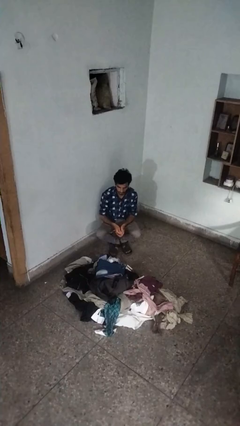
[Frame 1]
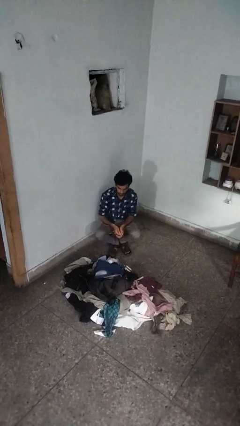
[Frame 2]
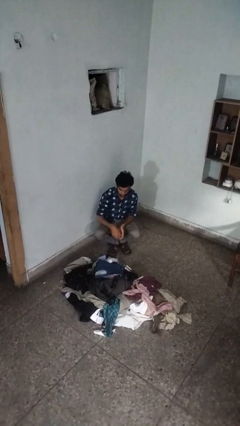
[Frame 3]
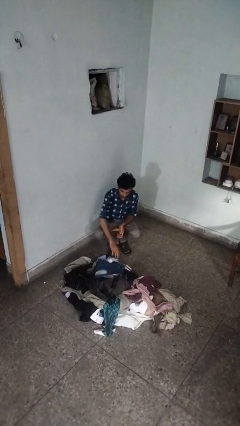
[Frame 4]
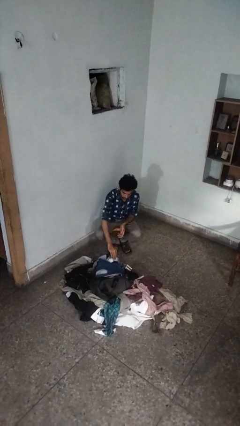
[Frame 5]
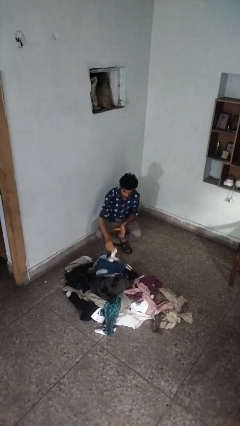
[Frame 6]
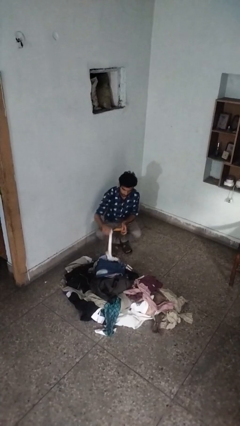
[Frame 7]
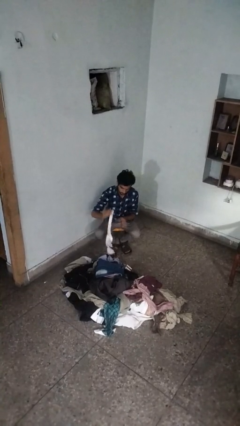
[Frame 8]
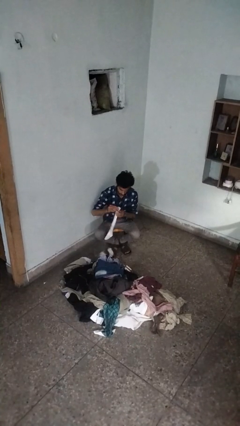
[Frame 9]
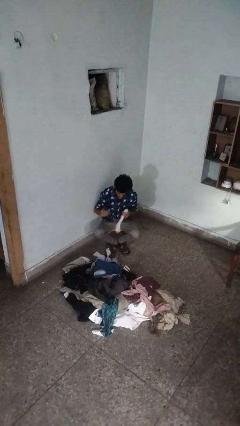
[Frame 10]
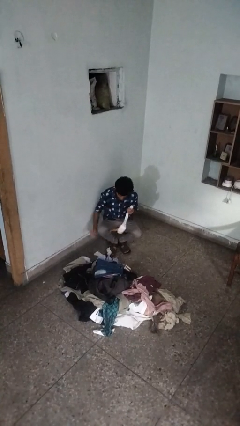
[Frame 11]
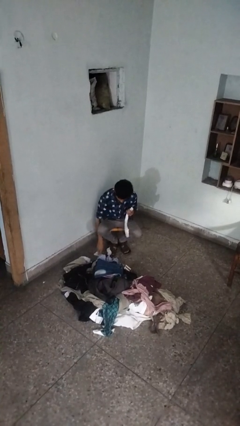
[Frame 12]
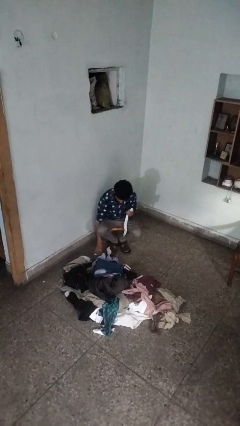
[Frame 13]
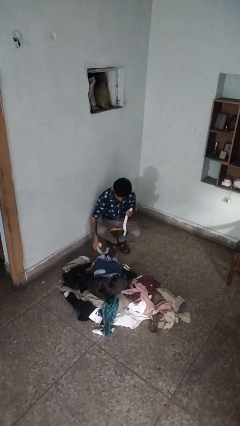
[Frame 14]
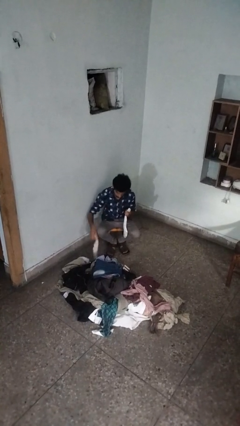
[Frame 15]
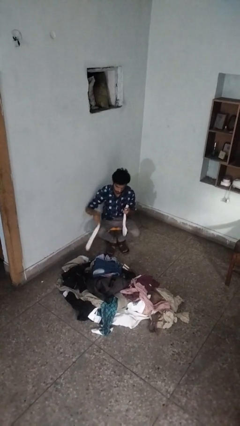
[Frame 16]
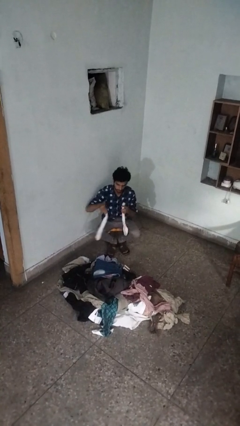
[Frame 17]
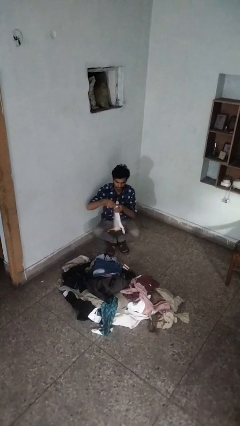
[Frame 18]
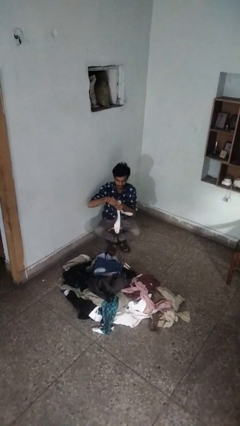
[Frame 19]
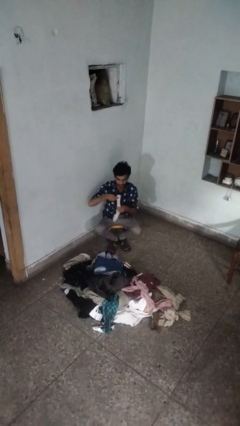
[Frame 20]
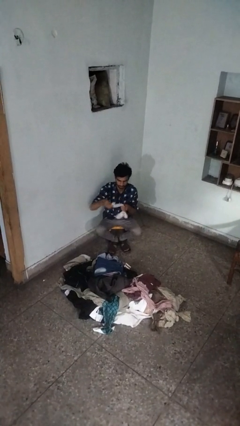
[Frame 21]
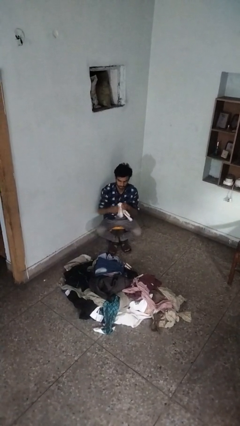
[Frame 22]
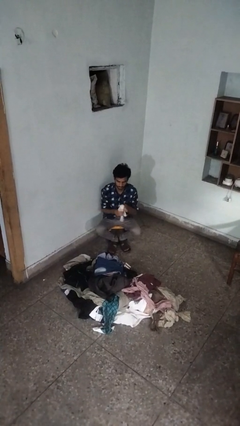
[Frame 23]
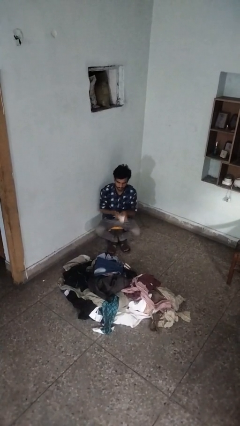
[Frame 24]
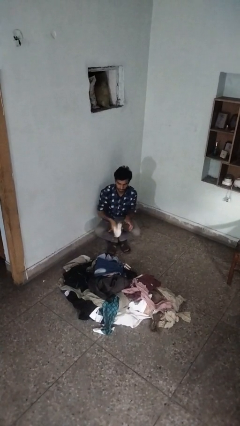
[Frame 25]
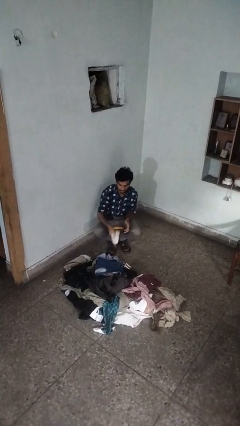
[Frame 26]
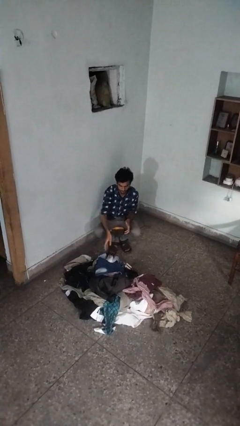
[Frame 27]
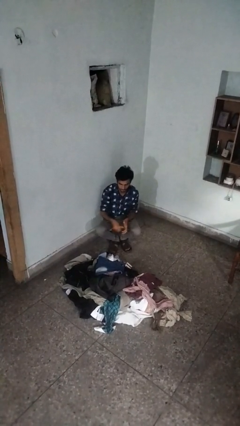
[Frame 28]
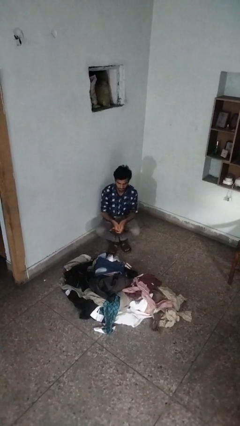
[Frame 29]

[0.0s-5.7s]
person folds socks

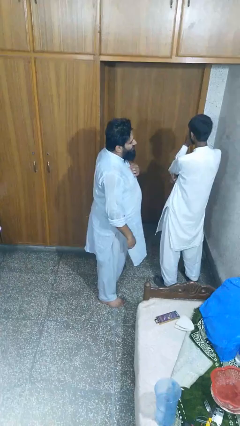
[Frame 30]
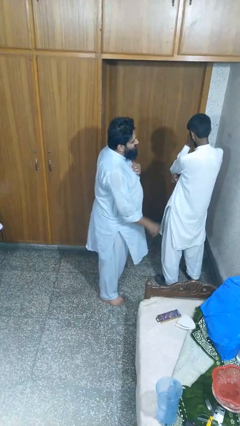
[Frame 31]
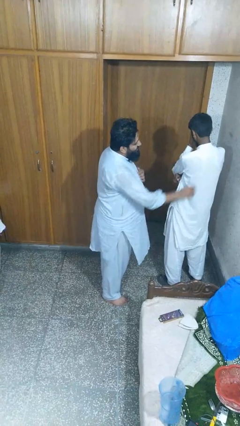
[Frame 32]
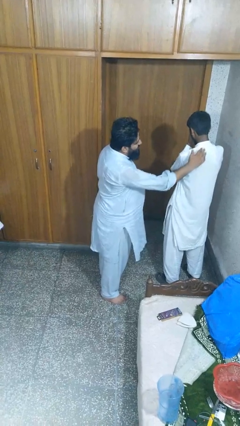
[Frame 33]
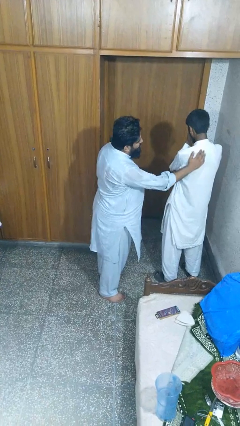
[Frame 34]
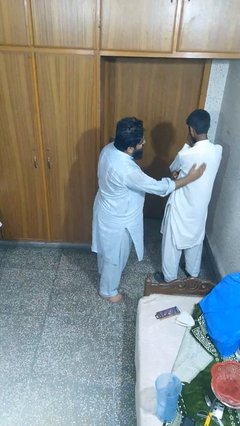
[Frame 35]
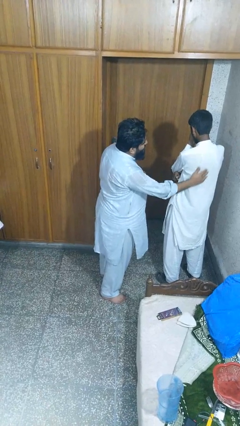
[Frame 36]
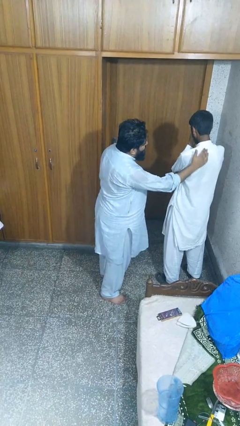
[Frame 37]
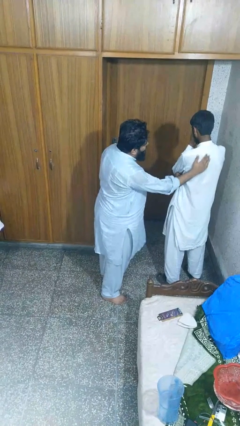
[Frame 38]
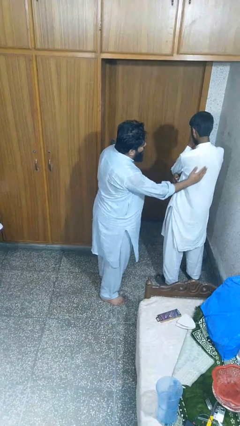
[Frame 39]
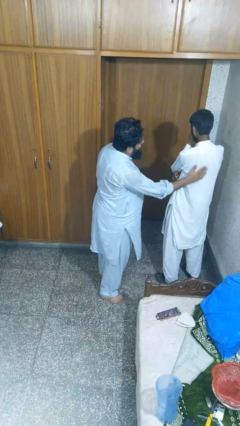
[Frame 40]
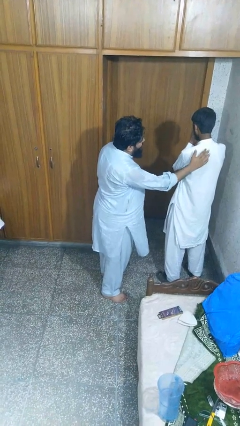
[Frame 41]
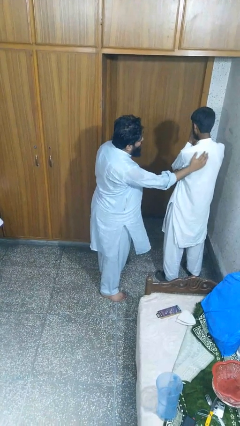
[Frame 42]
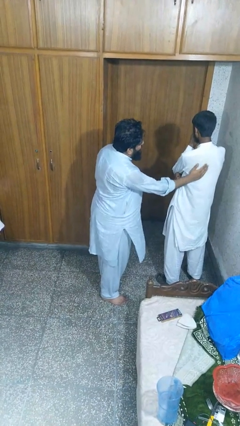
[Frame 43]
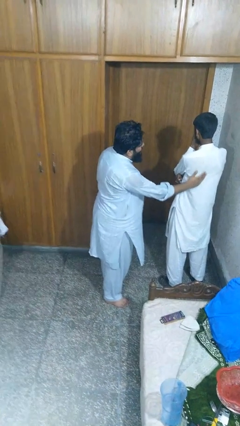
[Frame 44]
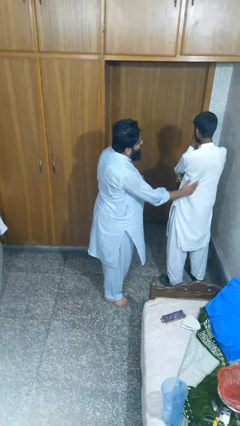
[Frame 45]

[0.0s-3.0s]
person touches back of person

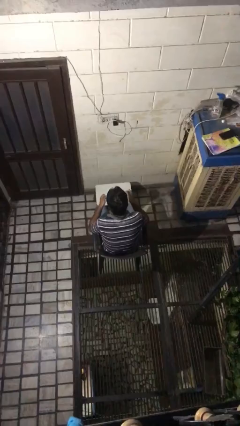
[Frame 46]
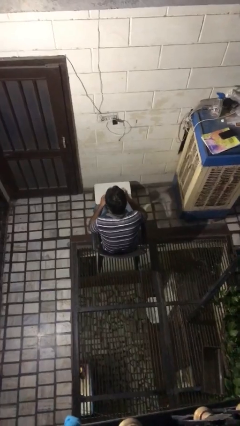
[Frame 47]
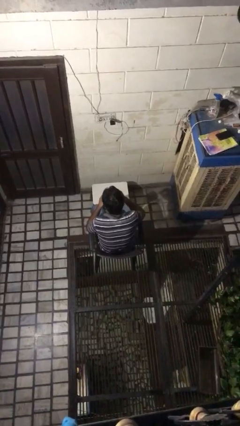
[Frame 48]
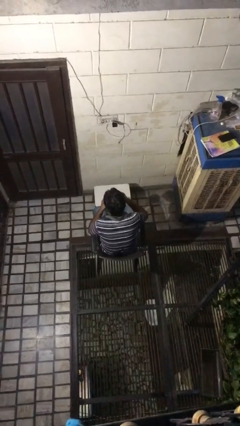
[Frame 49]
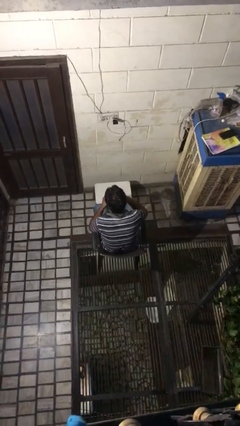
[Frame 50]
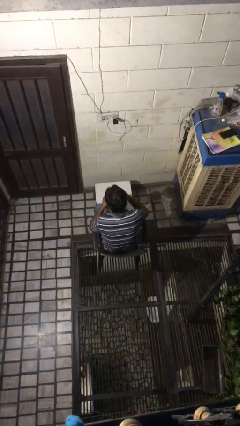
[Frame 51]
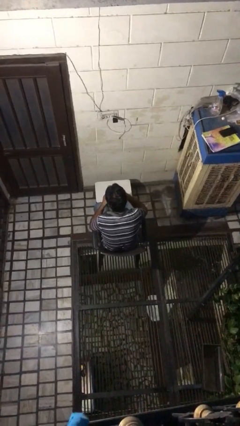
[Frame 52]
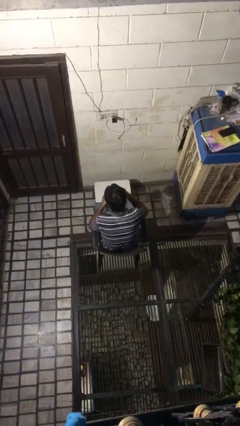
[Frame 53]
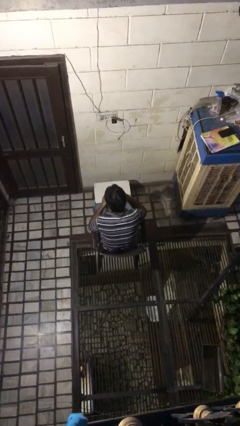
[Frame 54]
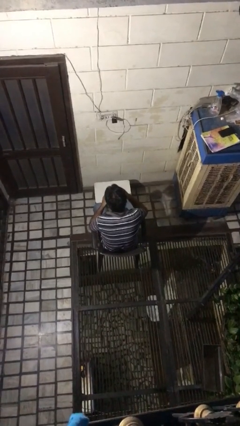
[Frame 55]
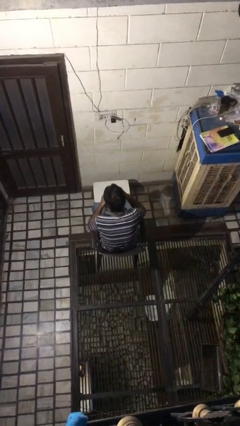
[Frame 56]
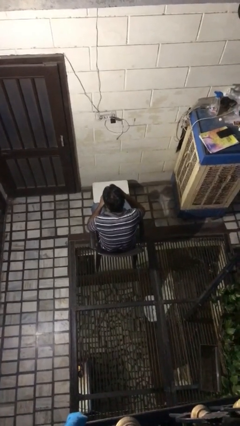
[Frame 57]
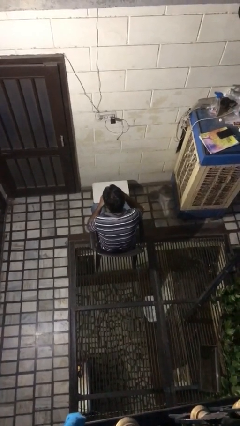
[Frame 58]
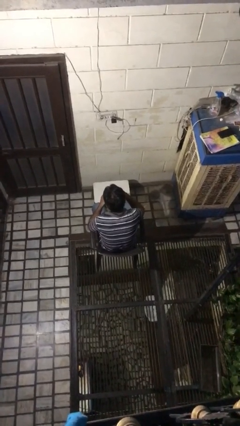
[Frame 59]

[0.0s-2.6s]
person stirs mug

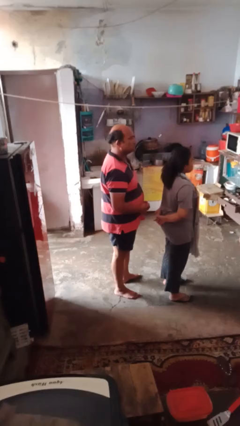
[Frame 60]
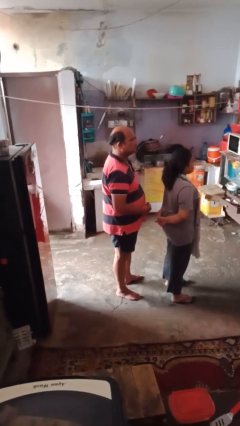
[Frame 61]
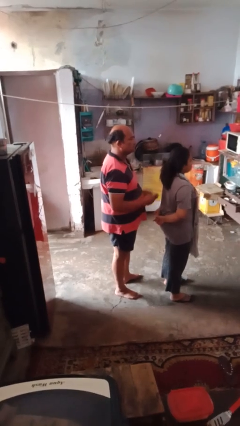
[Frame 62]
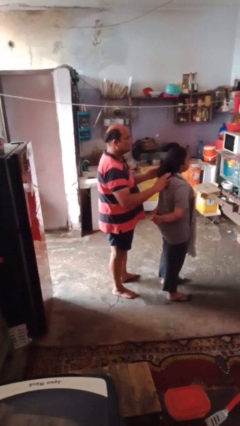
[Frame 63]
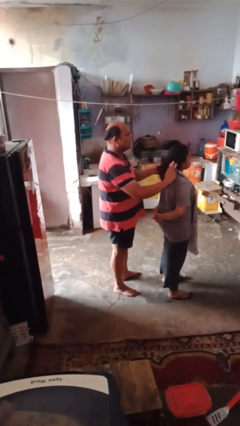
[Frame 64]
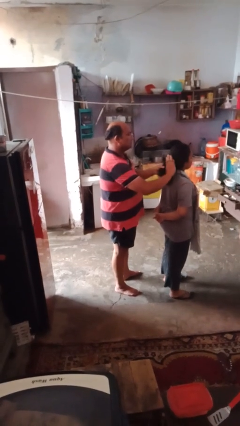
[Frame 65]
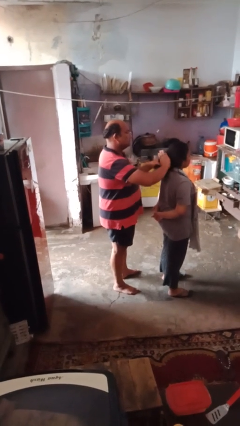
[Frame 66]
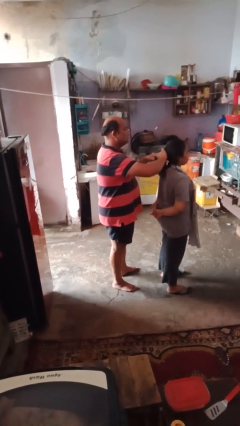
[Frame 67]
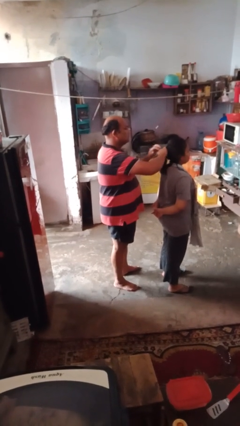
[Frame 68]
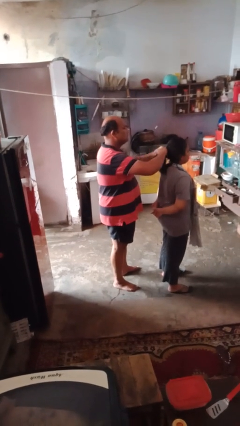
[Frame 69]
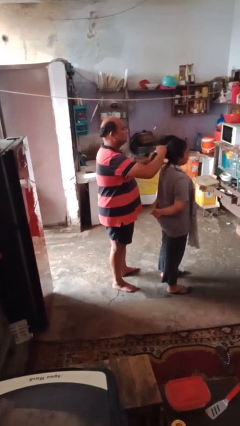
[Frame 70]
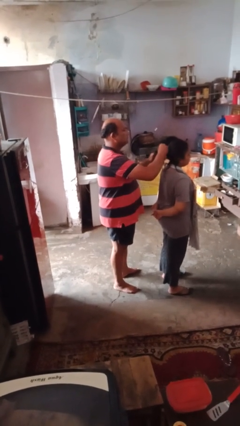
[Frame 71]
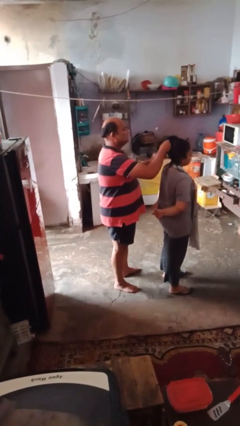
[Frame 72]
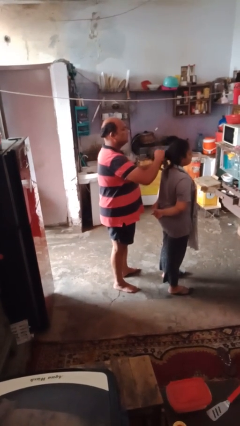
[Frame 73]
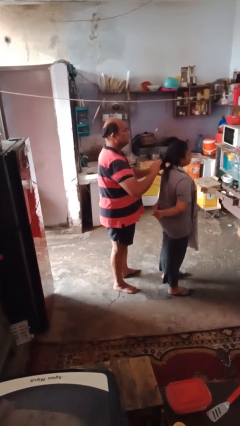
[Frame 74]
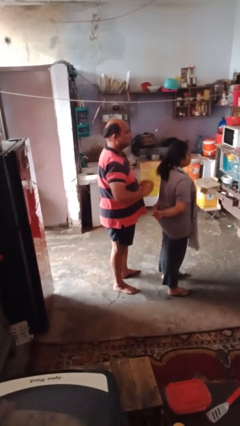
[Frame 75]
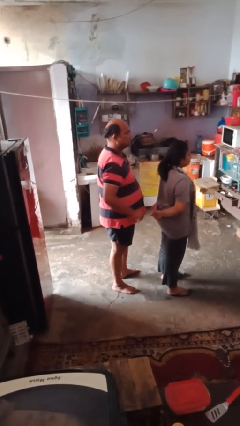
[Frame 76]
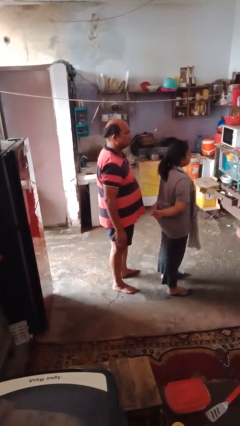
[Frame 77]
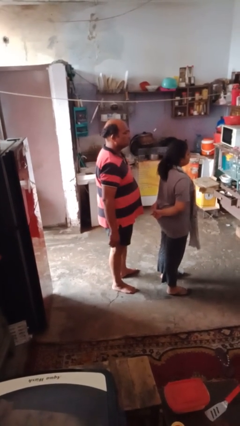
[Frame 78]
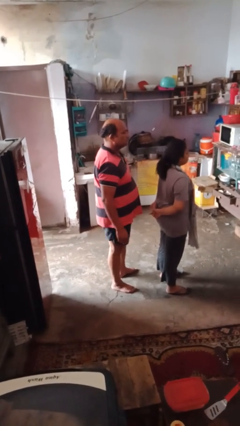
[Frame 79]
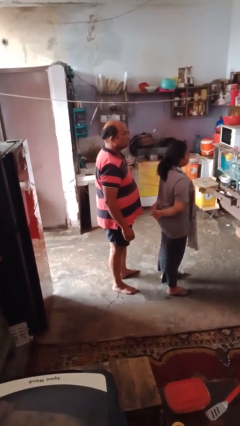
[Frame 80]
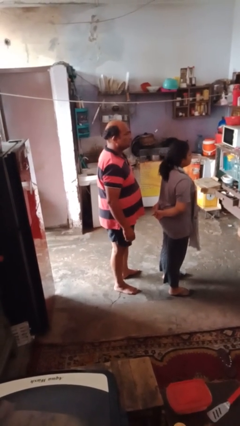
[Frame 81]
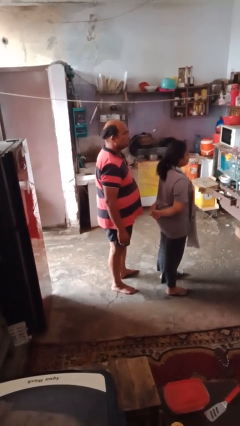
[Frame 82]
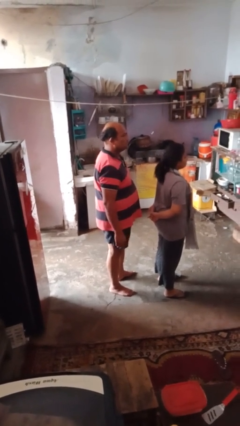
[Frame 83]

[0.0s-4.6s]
person braids hair of person

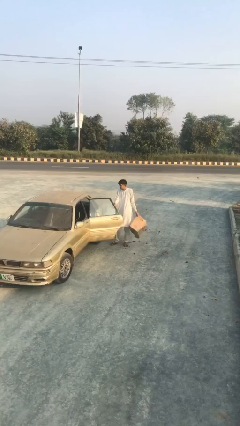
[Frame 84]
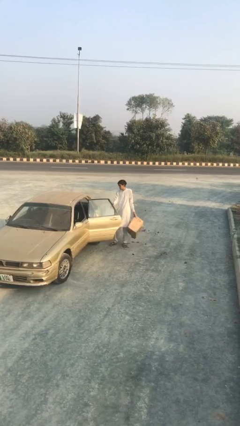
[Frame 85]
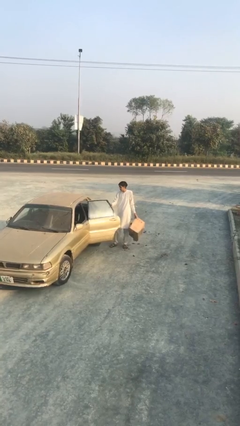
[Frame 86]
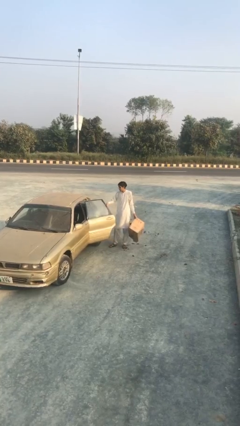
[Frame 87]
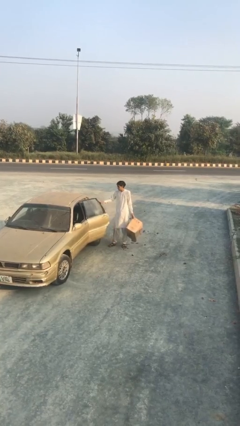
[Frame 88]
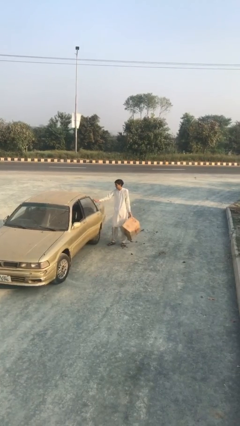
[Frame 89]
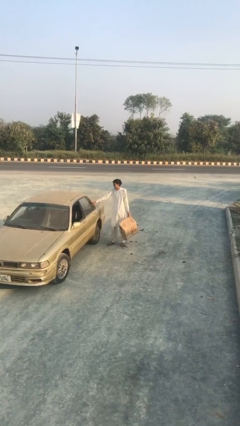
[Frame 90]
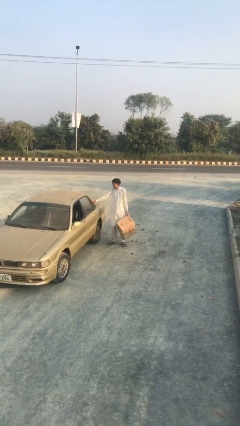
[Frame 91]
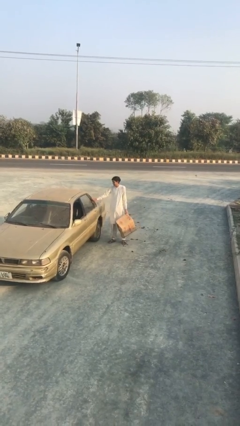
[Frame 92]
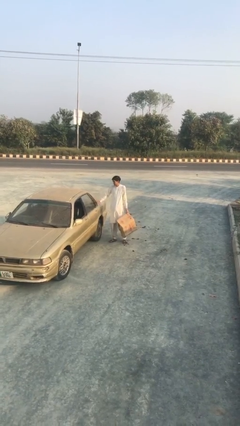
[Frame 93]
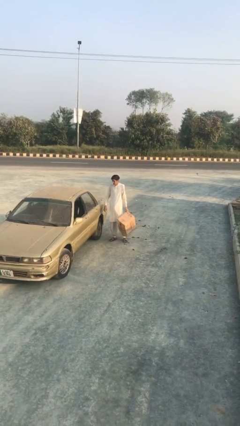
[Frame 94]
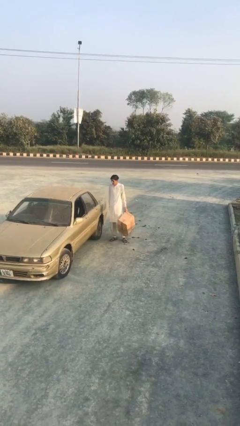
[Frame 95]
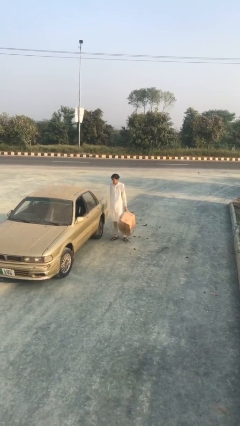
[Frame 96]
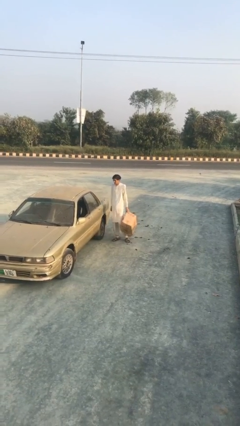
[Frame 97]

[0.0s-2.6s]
person closes car door
